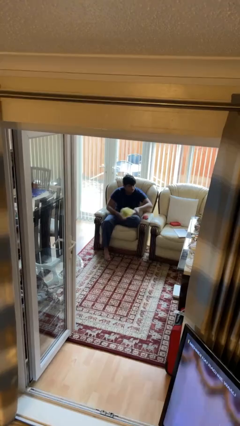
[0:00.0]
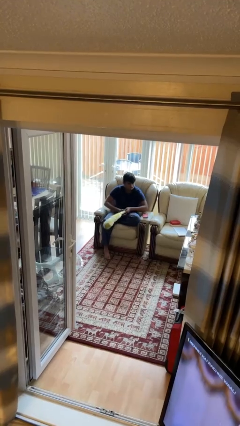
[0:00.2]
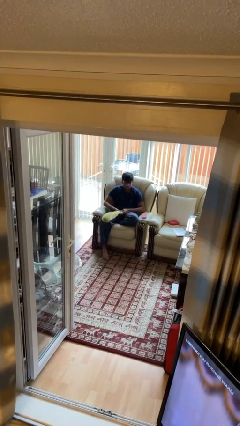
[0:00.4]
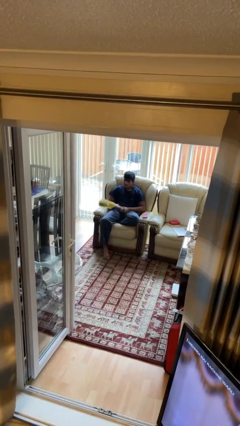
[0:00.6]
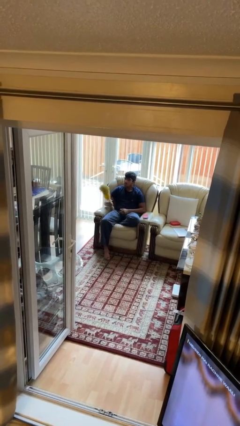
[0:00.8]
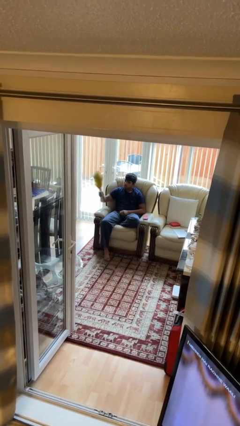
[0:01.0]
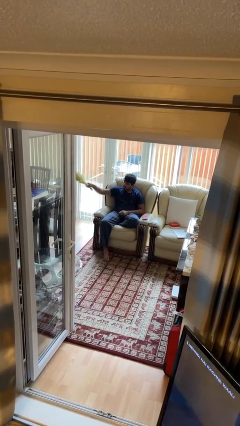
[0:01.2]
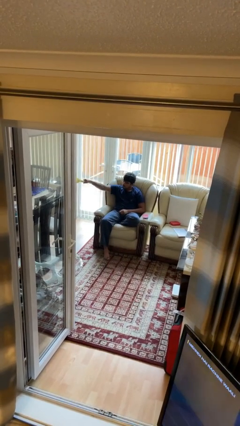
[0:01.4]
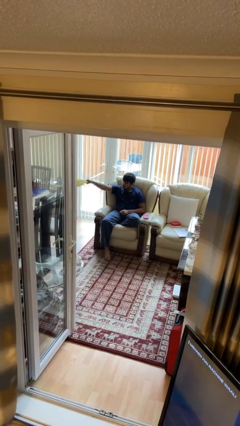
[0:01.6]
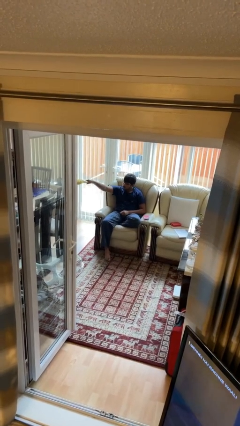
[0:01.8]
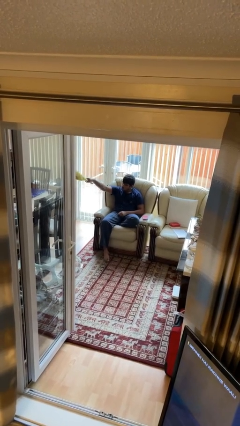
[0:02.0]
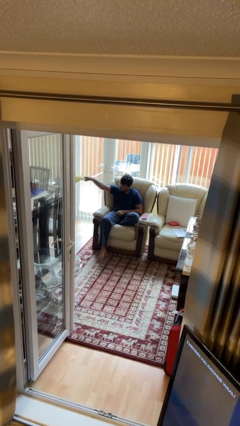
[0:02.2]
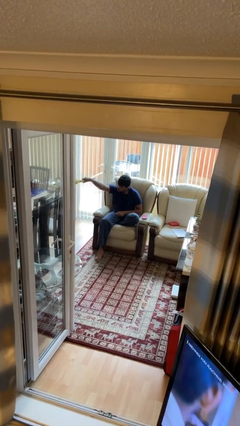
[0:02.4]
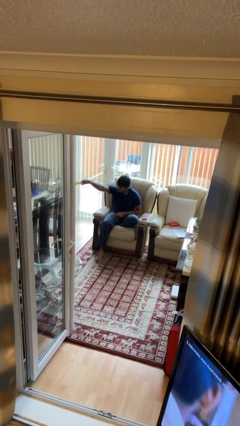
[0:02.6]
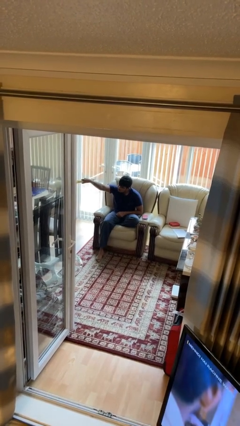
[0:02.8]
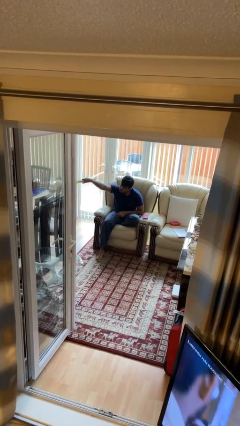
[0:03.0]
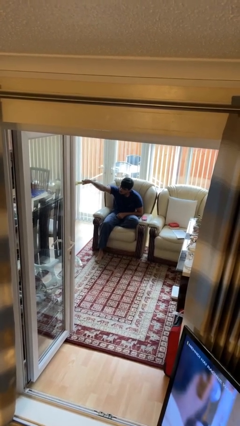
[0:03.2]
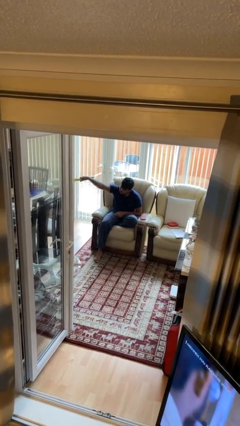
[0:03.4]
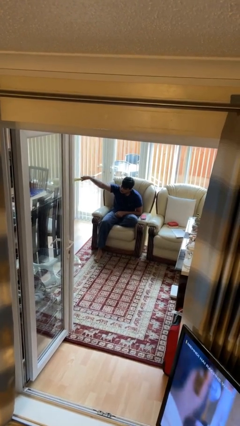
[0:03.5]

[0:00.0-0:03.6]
person dusts furniture

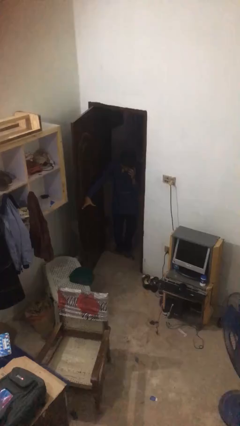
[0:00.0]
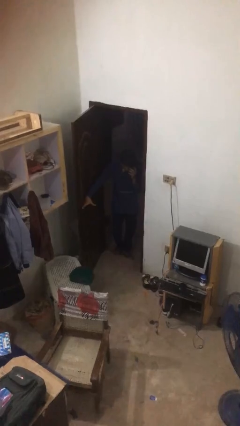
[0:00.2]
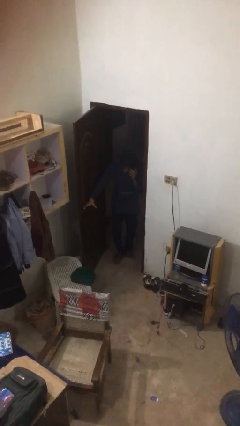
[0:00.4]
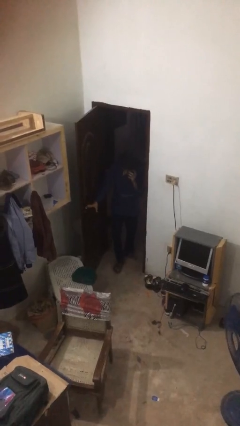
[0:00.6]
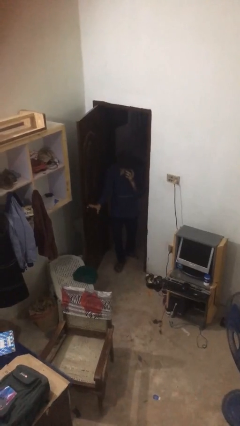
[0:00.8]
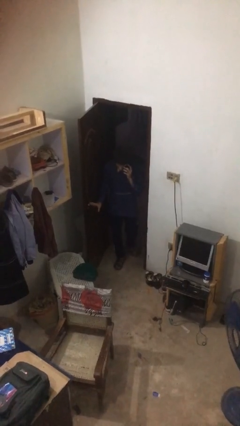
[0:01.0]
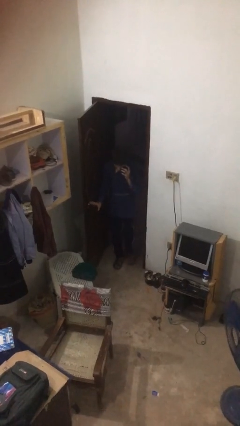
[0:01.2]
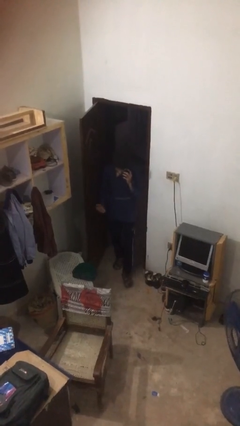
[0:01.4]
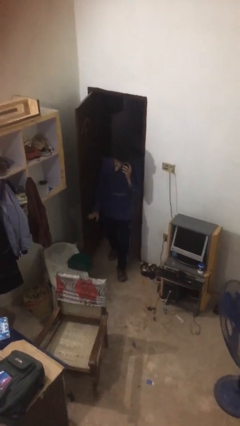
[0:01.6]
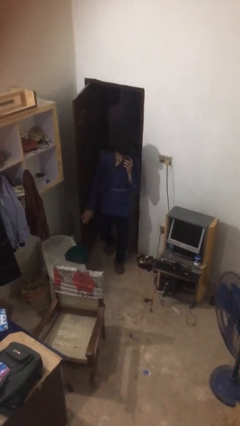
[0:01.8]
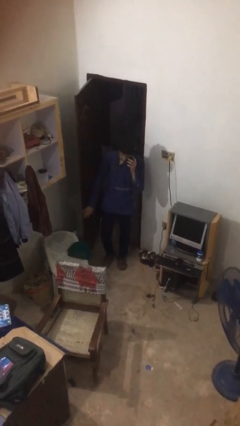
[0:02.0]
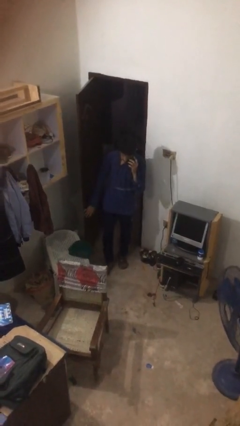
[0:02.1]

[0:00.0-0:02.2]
person enters scene through structure

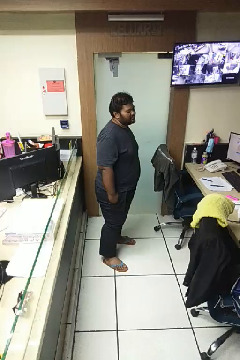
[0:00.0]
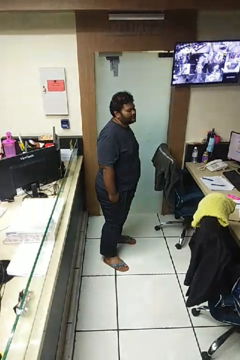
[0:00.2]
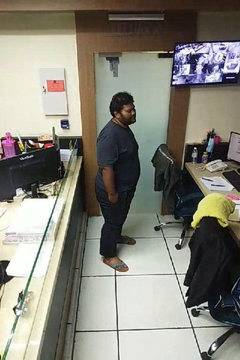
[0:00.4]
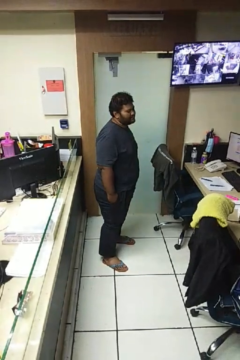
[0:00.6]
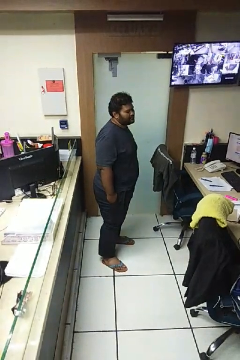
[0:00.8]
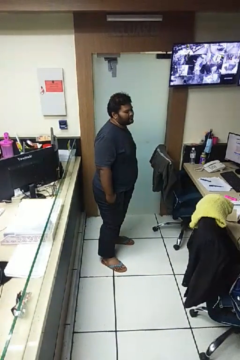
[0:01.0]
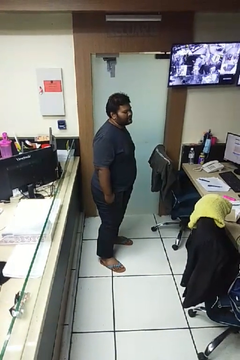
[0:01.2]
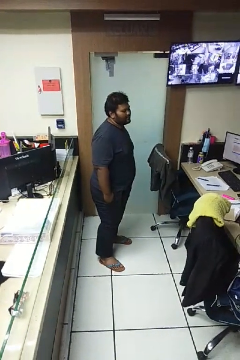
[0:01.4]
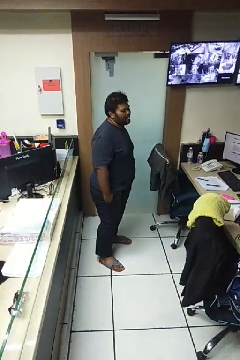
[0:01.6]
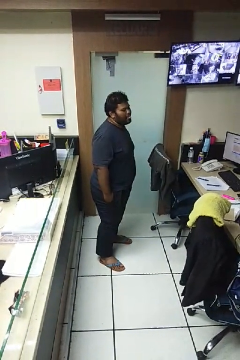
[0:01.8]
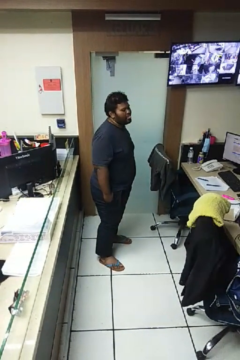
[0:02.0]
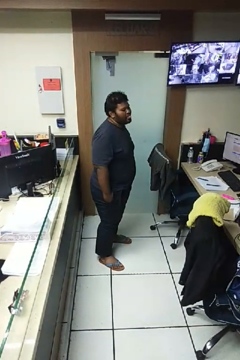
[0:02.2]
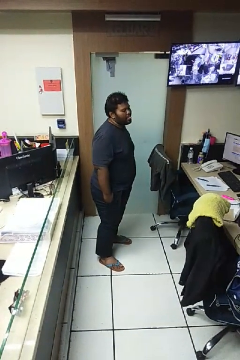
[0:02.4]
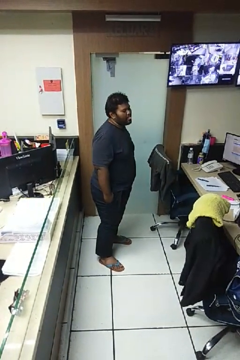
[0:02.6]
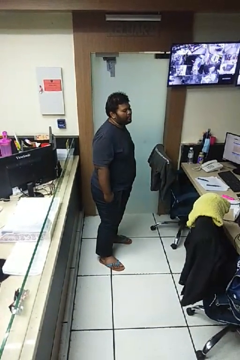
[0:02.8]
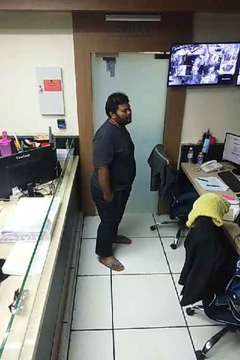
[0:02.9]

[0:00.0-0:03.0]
person sticks out tongue

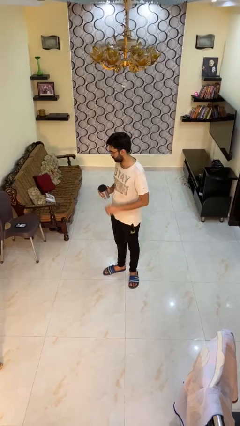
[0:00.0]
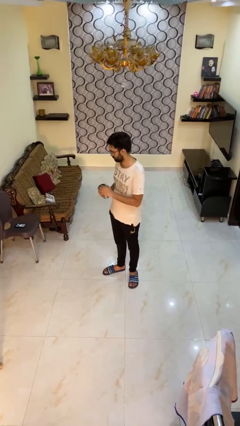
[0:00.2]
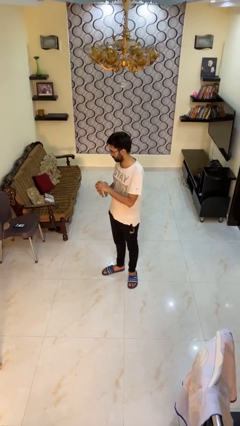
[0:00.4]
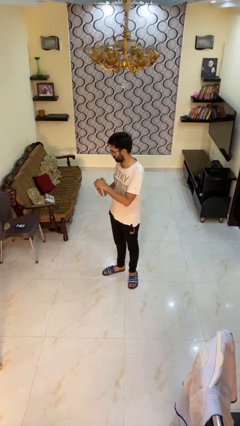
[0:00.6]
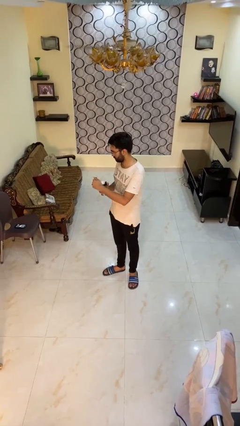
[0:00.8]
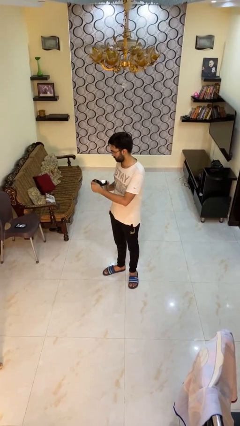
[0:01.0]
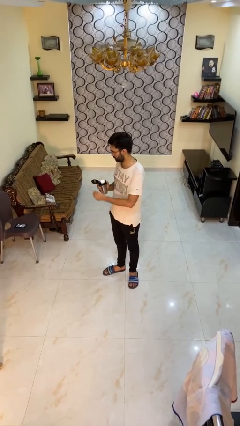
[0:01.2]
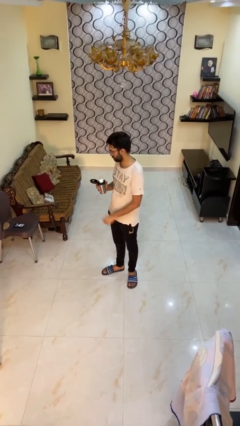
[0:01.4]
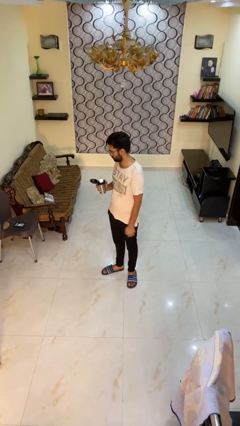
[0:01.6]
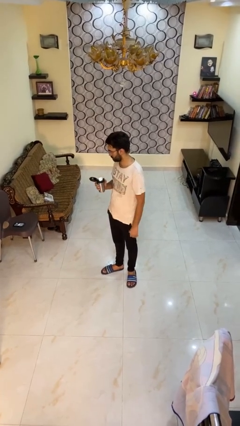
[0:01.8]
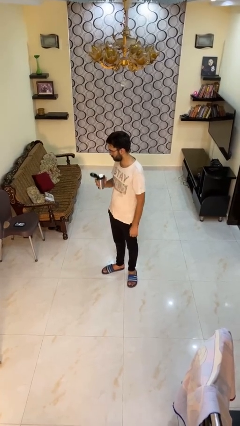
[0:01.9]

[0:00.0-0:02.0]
person opens beverage can

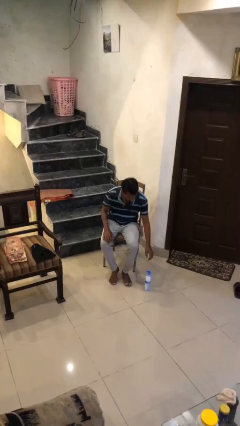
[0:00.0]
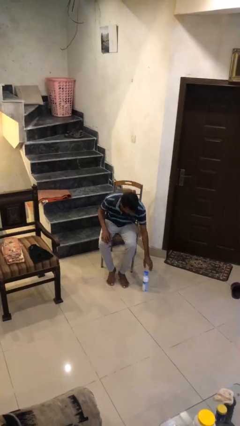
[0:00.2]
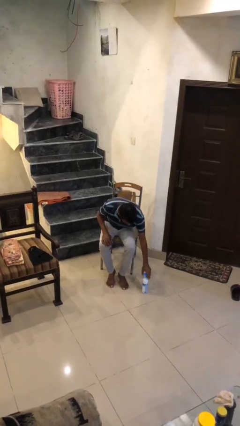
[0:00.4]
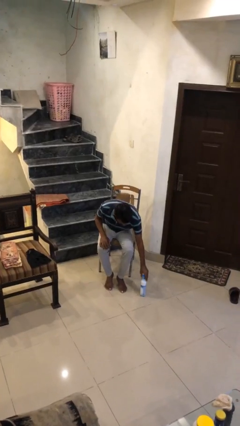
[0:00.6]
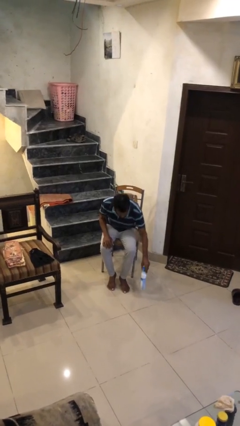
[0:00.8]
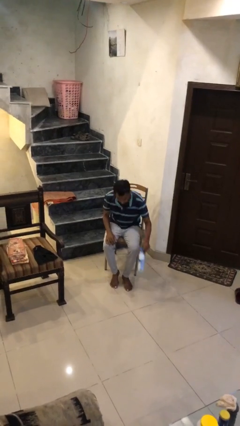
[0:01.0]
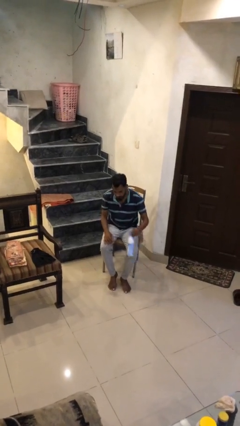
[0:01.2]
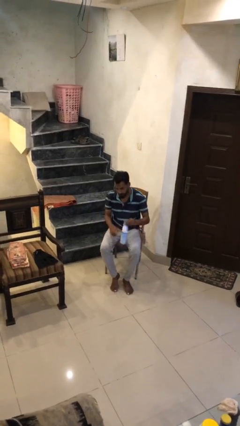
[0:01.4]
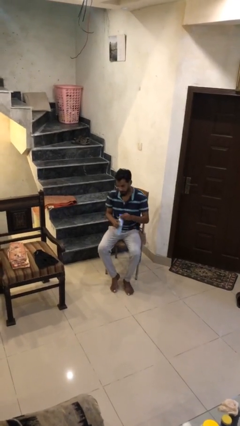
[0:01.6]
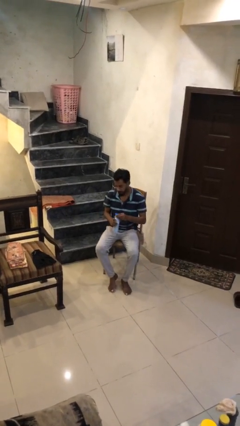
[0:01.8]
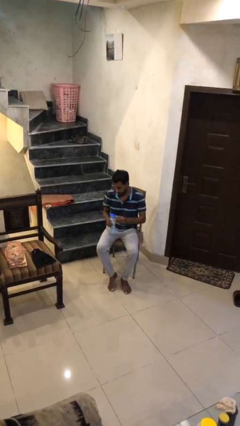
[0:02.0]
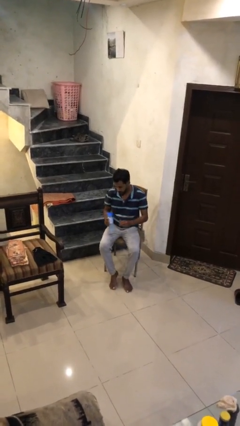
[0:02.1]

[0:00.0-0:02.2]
person picks up object from floor

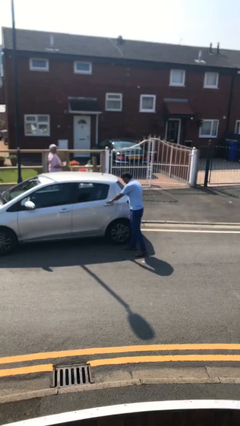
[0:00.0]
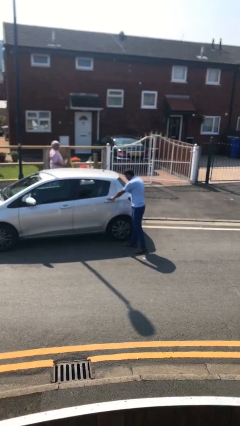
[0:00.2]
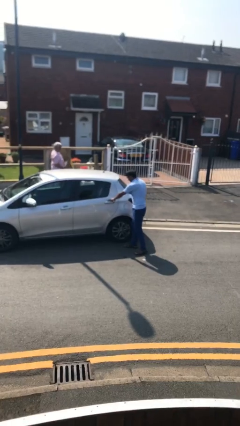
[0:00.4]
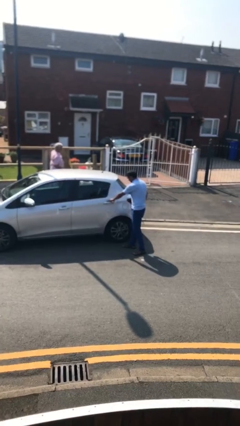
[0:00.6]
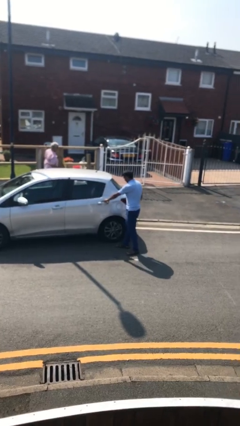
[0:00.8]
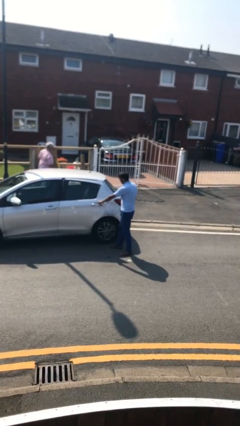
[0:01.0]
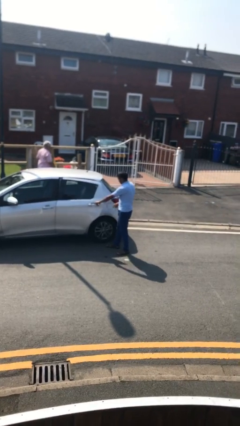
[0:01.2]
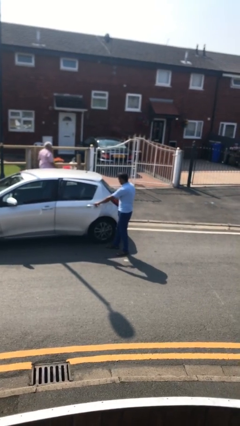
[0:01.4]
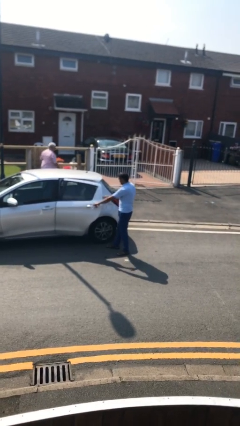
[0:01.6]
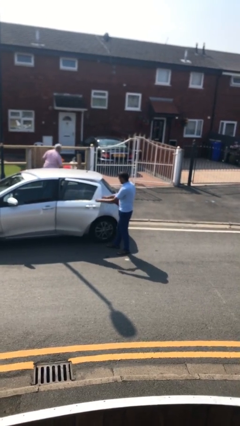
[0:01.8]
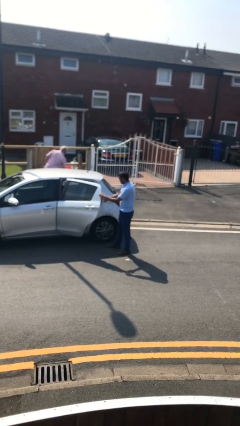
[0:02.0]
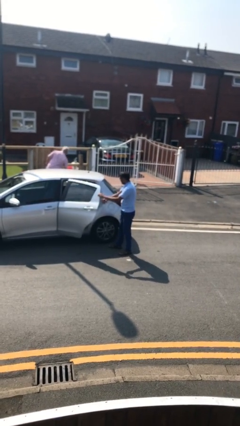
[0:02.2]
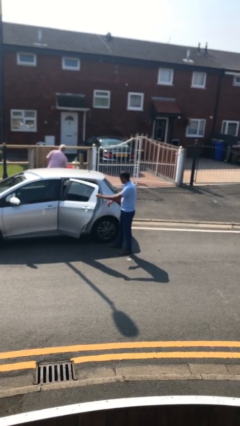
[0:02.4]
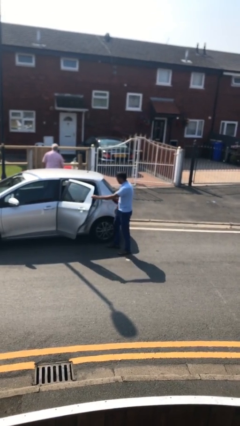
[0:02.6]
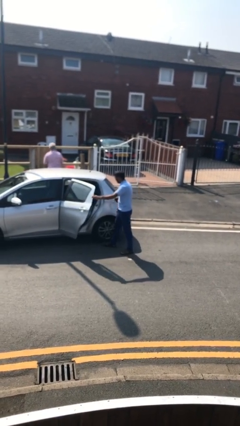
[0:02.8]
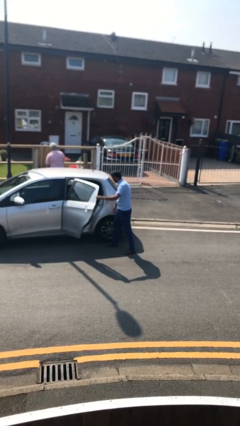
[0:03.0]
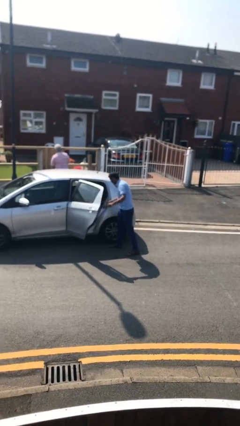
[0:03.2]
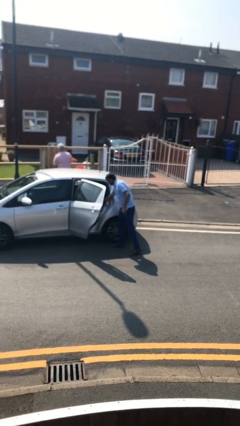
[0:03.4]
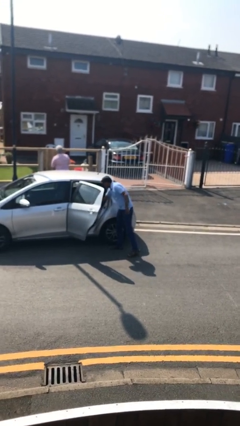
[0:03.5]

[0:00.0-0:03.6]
person opens car door

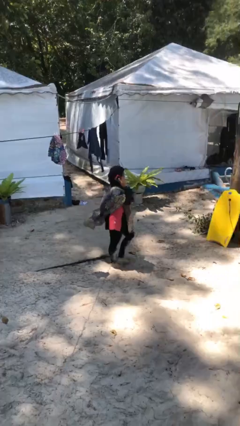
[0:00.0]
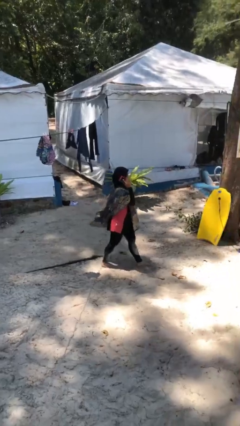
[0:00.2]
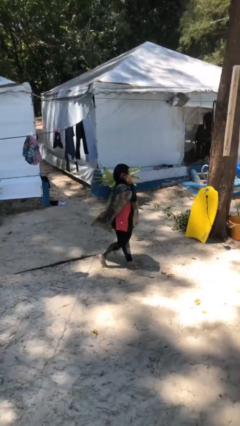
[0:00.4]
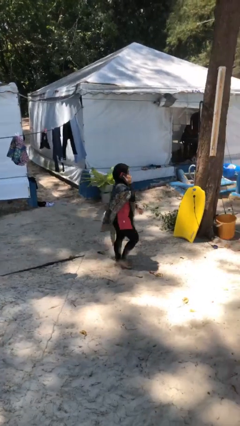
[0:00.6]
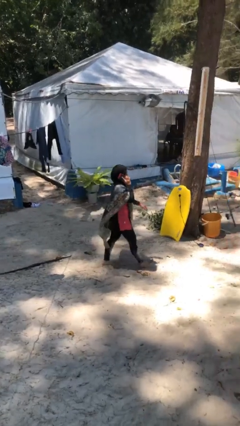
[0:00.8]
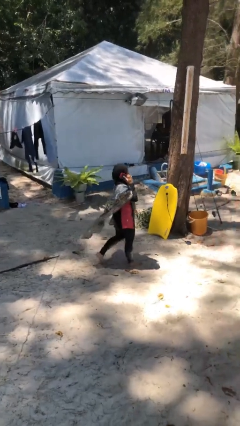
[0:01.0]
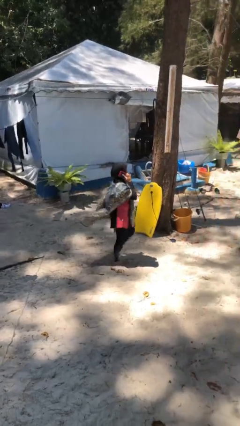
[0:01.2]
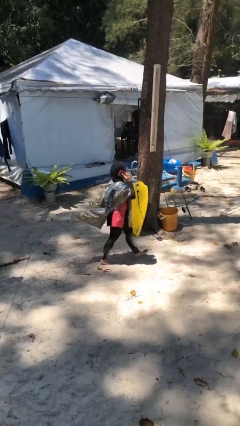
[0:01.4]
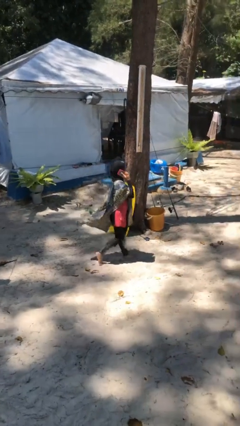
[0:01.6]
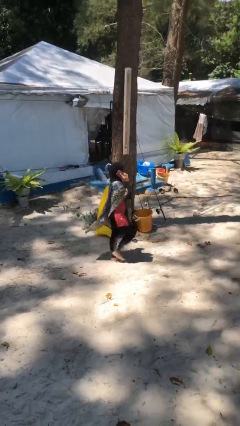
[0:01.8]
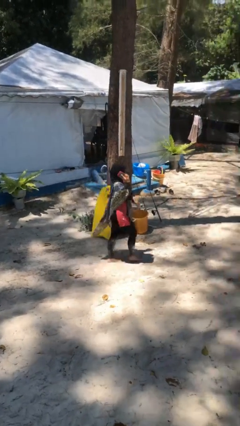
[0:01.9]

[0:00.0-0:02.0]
person talks on phone
